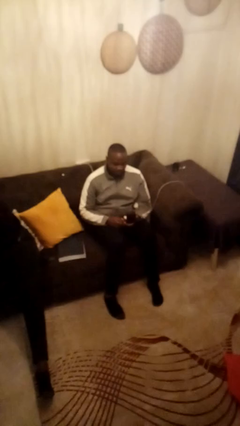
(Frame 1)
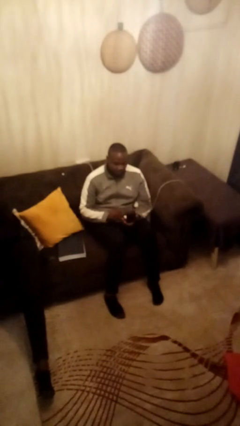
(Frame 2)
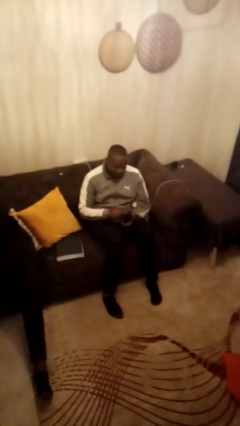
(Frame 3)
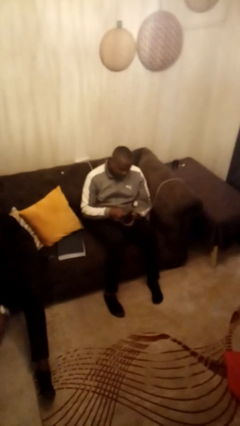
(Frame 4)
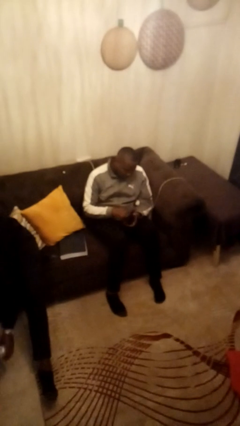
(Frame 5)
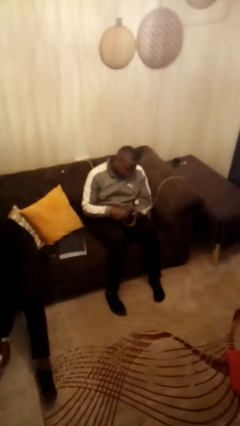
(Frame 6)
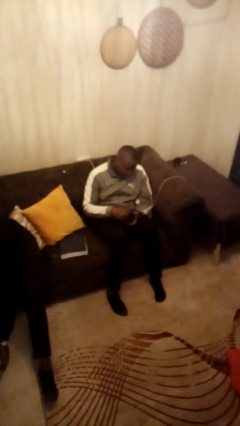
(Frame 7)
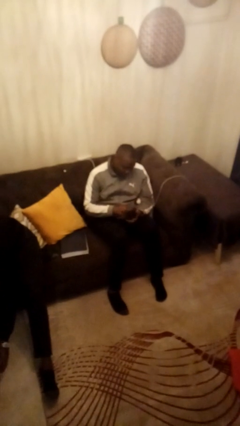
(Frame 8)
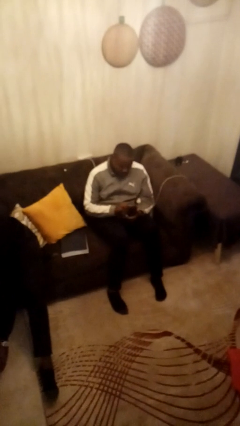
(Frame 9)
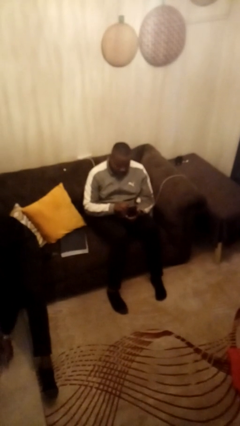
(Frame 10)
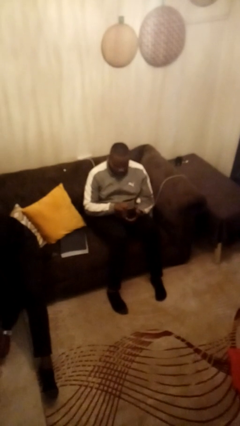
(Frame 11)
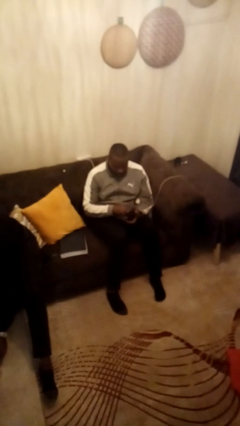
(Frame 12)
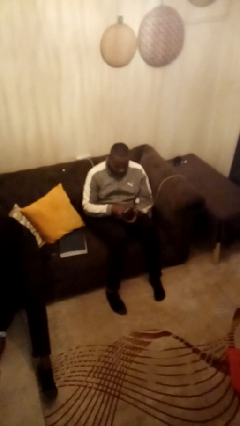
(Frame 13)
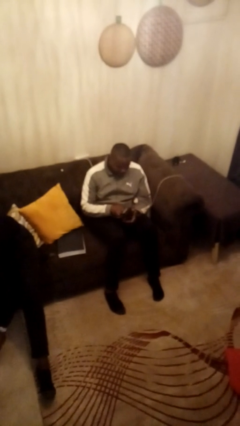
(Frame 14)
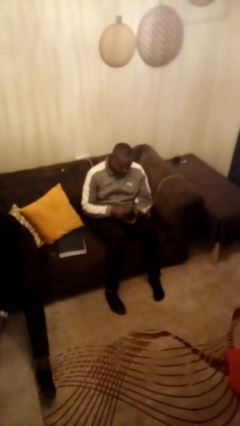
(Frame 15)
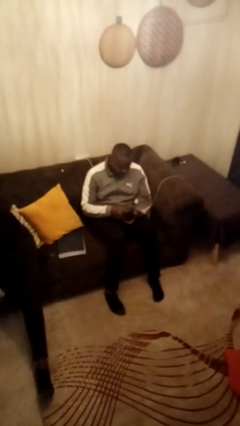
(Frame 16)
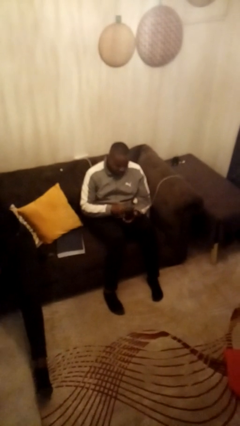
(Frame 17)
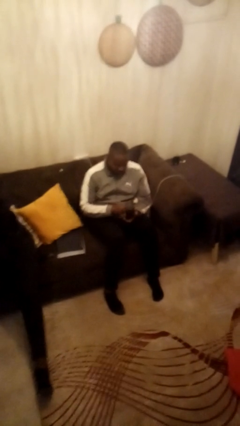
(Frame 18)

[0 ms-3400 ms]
person searches jewelry box

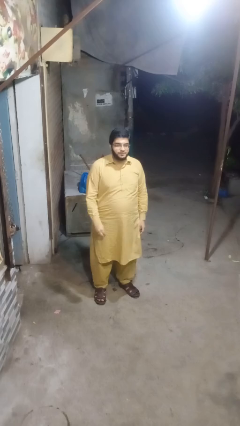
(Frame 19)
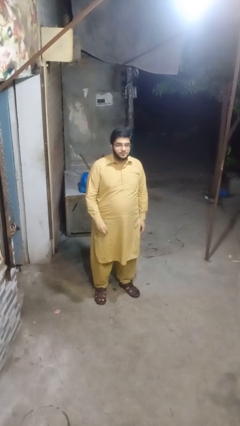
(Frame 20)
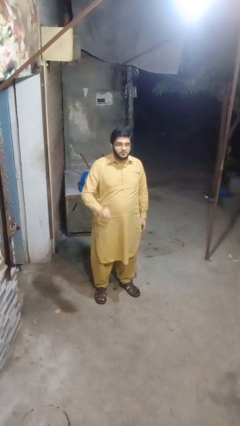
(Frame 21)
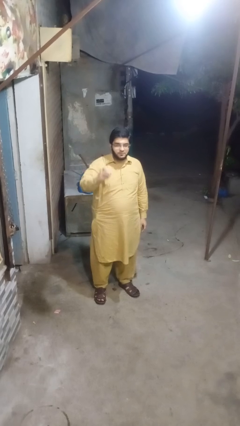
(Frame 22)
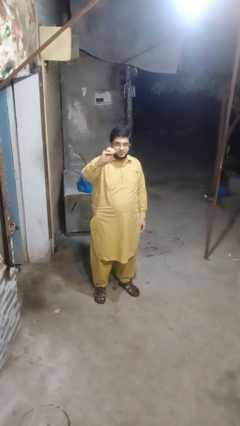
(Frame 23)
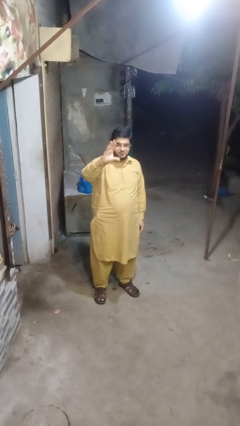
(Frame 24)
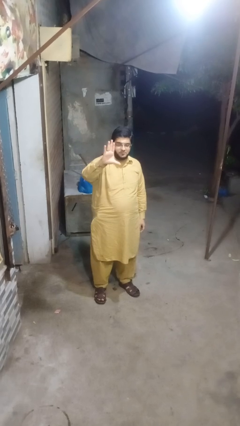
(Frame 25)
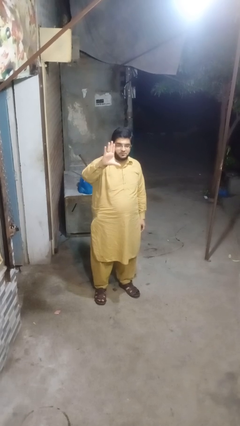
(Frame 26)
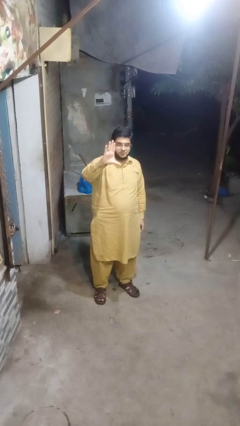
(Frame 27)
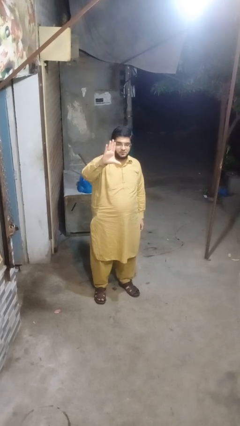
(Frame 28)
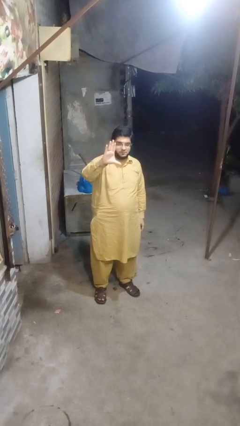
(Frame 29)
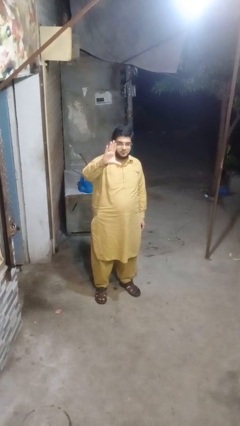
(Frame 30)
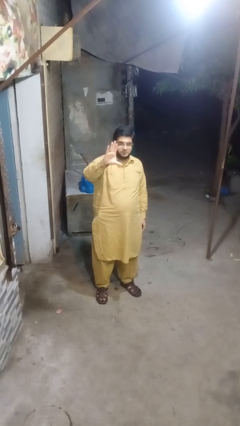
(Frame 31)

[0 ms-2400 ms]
person gestures zoom out

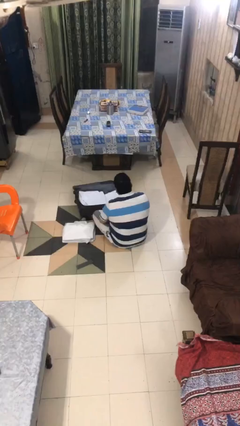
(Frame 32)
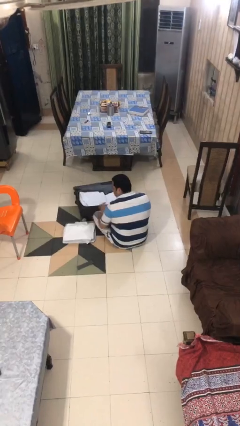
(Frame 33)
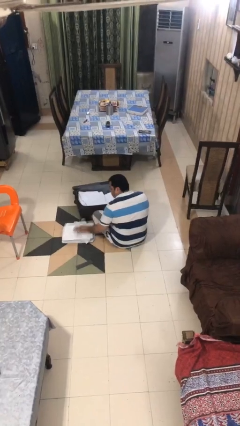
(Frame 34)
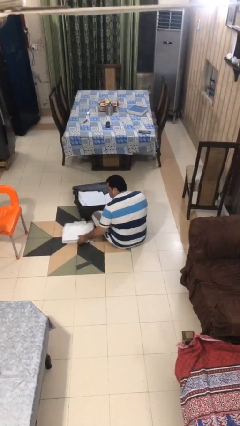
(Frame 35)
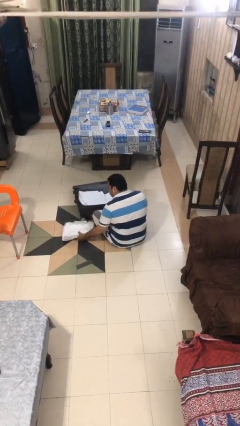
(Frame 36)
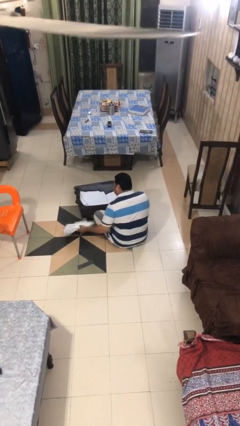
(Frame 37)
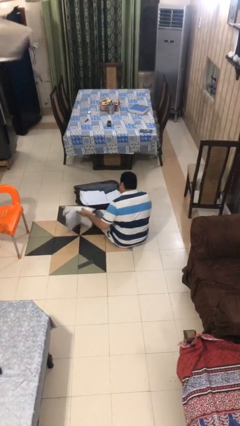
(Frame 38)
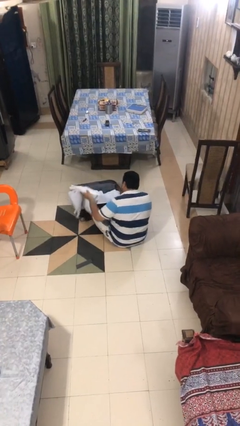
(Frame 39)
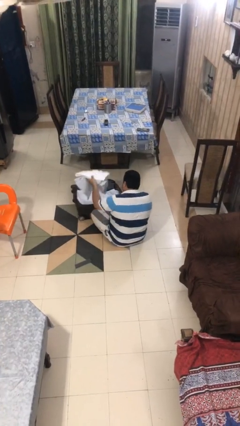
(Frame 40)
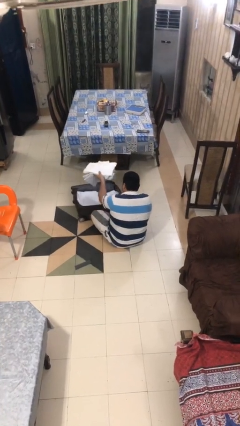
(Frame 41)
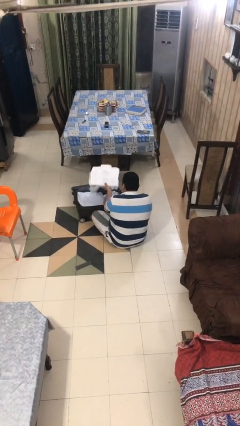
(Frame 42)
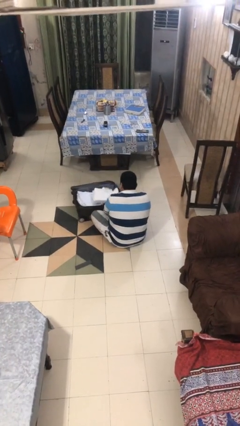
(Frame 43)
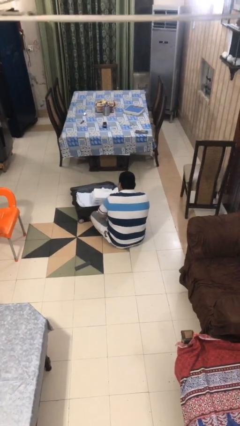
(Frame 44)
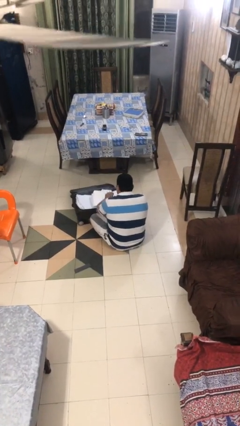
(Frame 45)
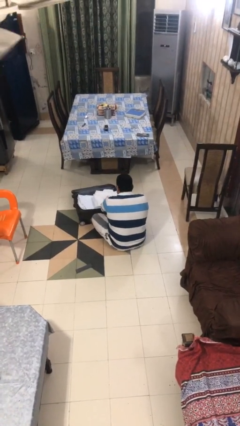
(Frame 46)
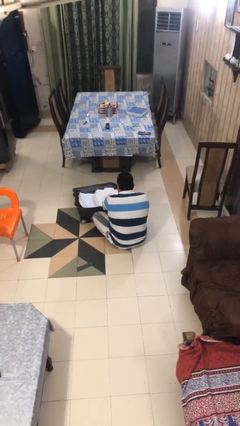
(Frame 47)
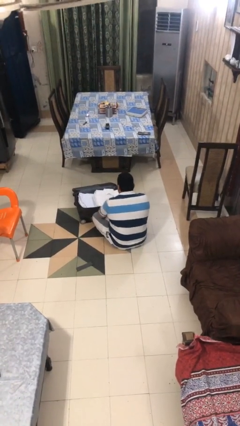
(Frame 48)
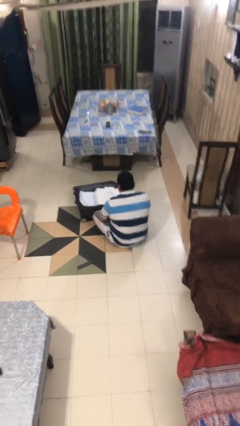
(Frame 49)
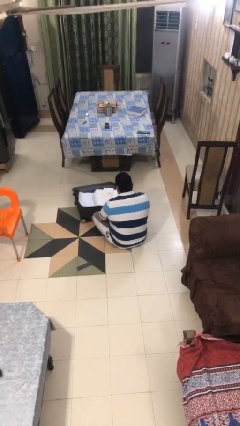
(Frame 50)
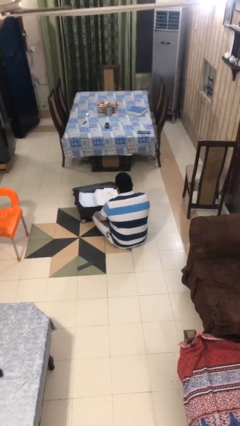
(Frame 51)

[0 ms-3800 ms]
person loads clothes into suitcase

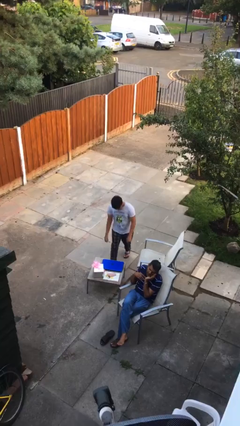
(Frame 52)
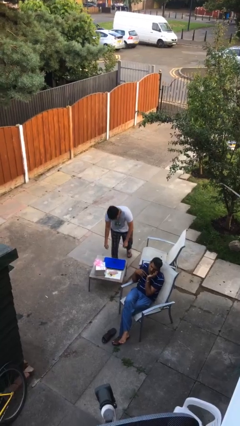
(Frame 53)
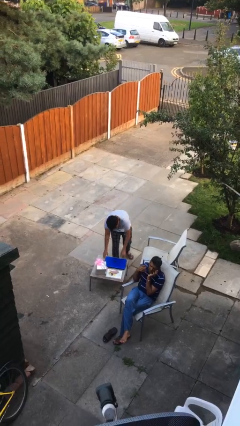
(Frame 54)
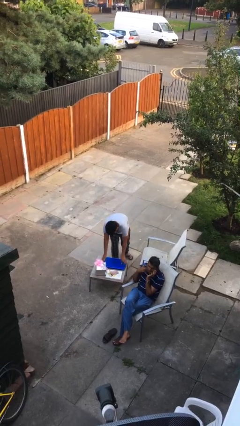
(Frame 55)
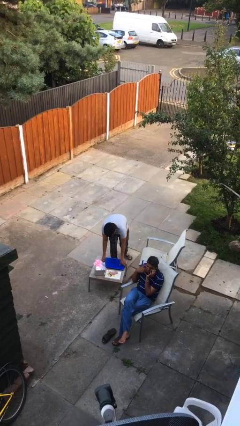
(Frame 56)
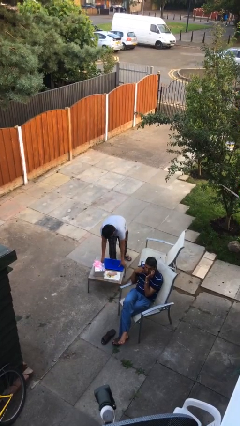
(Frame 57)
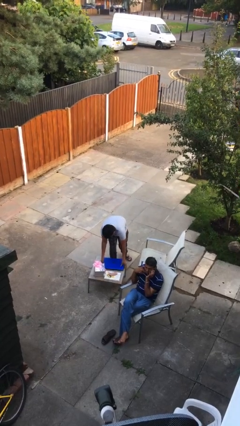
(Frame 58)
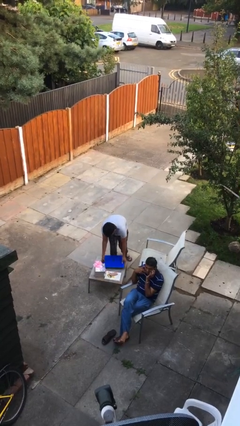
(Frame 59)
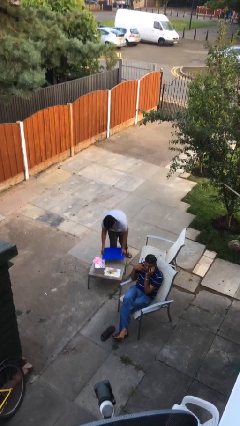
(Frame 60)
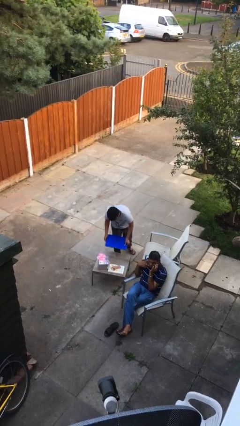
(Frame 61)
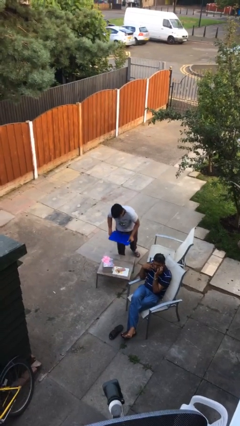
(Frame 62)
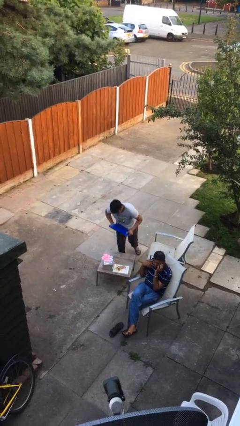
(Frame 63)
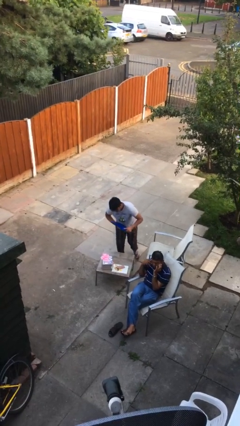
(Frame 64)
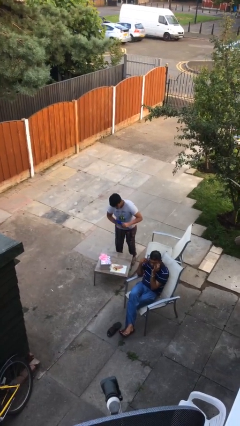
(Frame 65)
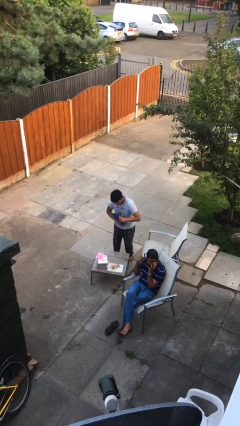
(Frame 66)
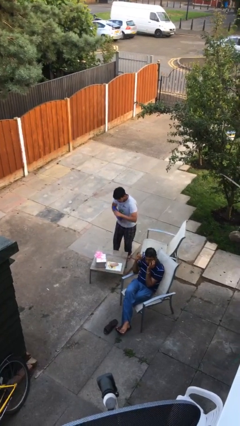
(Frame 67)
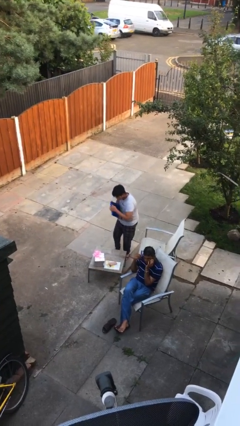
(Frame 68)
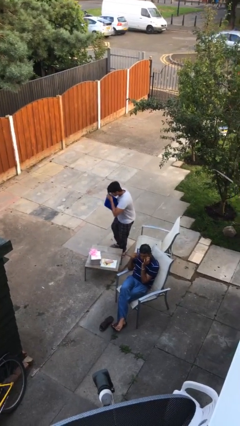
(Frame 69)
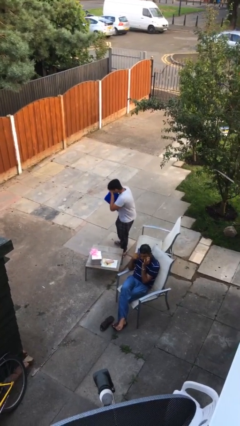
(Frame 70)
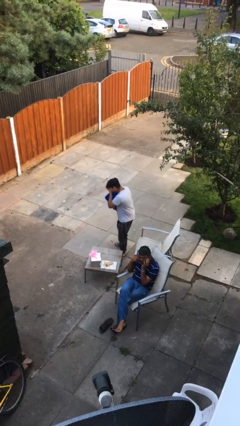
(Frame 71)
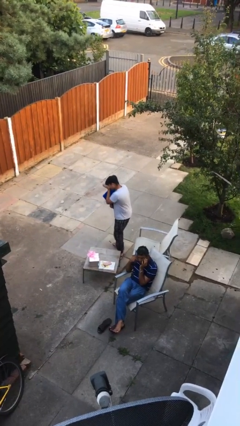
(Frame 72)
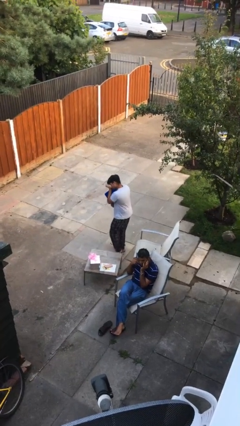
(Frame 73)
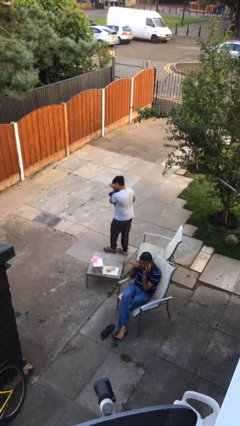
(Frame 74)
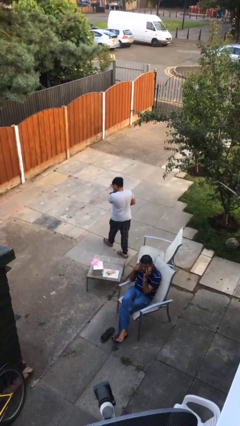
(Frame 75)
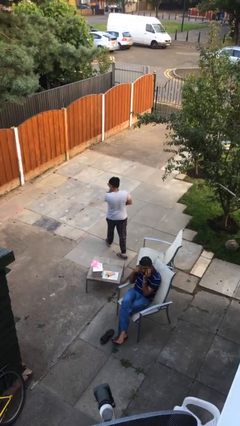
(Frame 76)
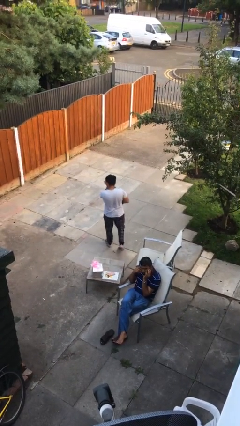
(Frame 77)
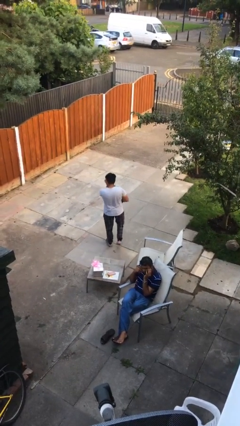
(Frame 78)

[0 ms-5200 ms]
person steals object from person

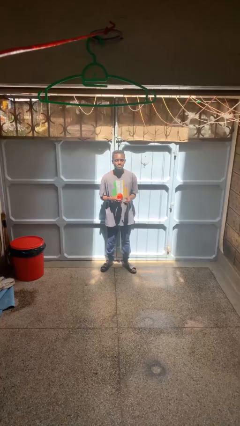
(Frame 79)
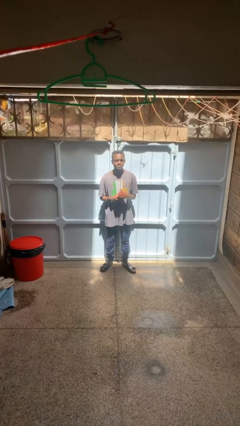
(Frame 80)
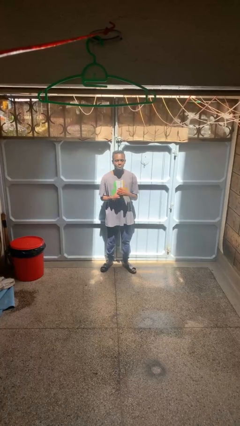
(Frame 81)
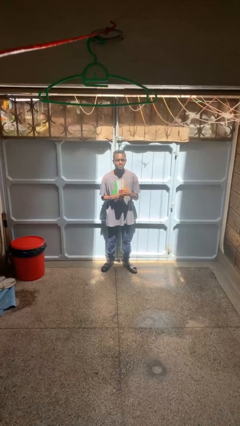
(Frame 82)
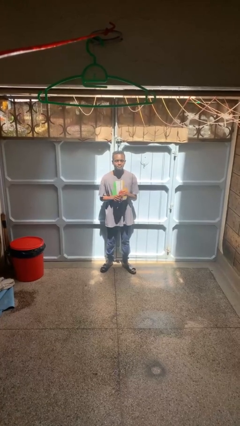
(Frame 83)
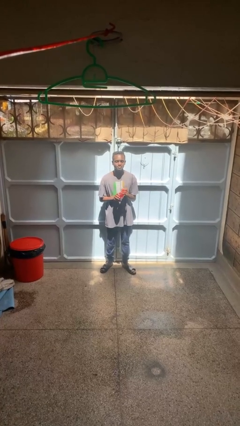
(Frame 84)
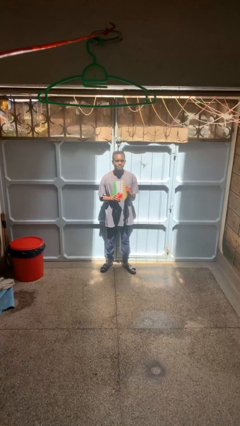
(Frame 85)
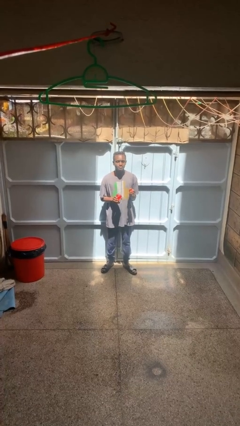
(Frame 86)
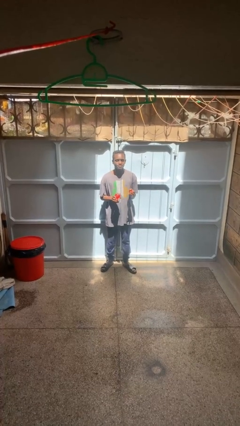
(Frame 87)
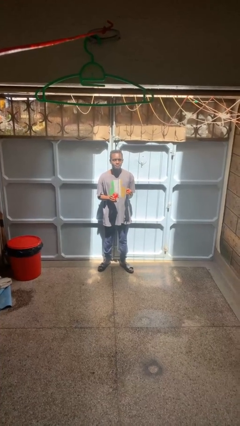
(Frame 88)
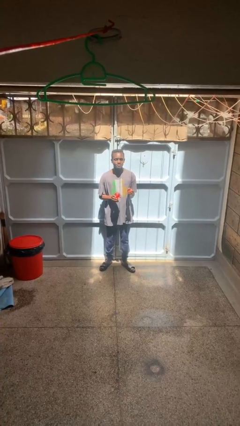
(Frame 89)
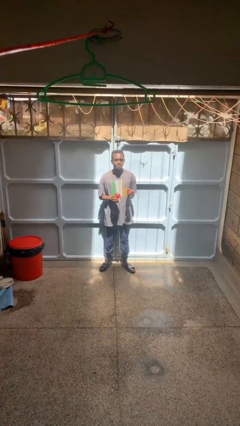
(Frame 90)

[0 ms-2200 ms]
person opens jar

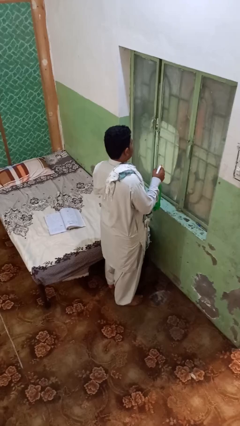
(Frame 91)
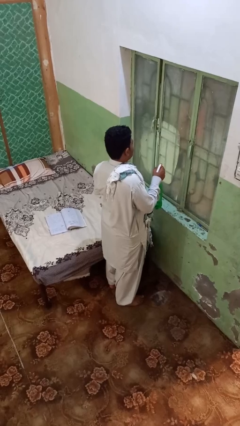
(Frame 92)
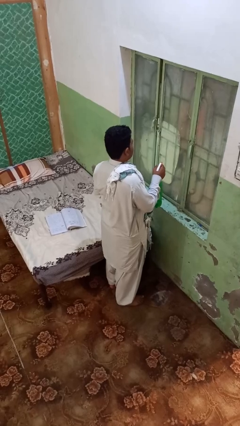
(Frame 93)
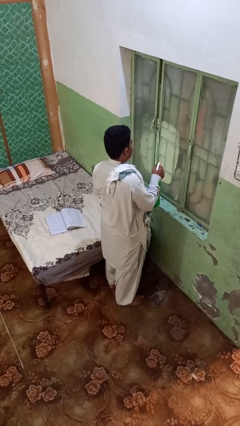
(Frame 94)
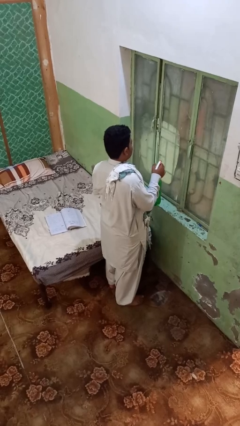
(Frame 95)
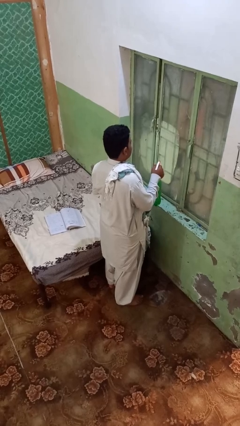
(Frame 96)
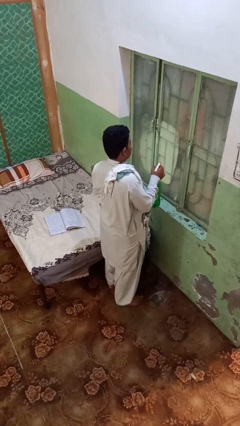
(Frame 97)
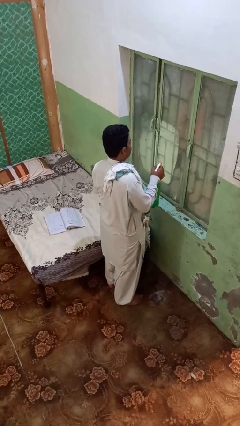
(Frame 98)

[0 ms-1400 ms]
person sprays from bottle
